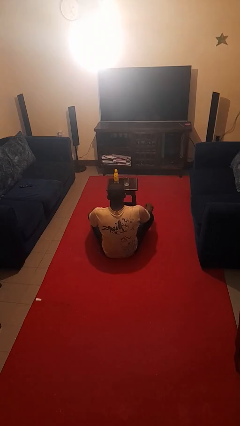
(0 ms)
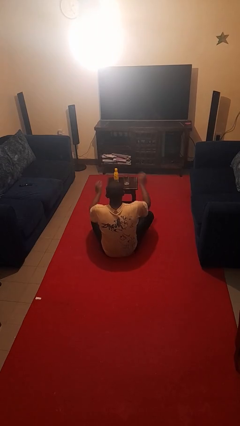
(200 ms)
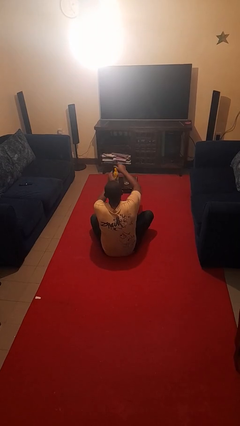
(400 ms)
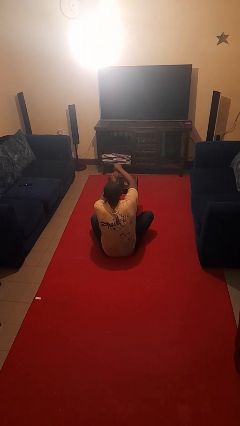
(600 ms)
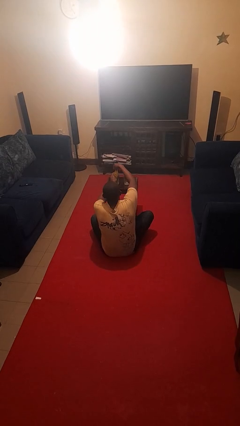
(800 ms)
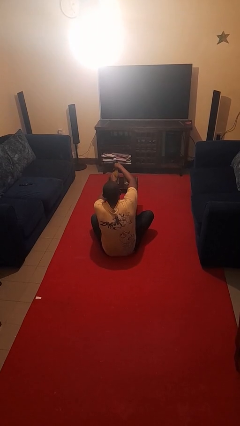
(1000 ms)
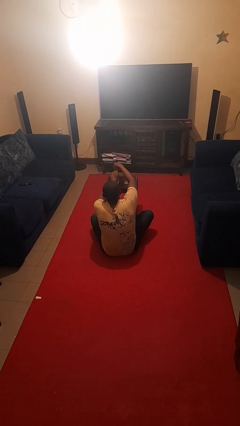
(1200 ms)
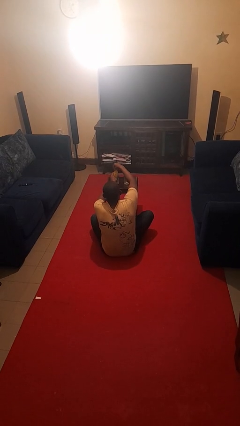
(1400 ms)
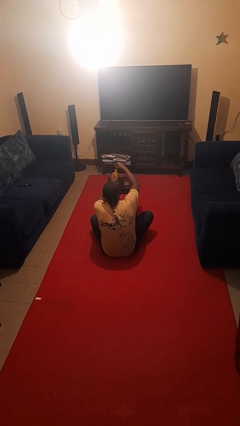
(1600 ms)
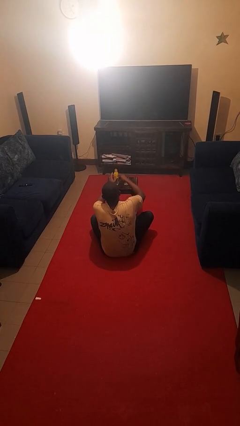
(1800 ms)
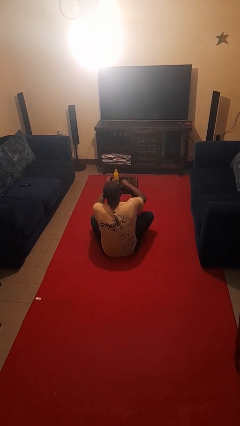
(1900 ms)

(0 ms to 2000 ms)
person unscrews lid from bottle

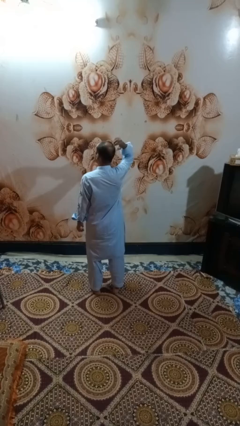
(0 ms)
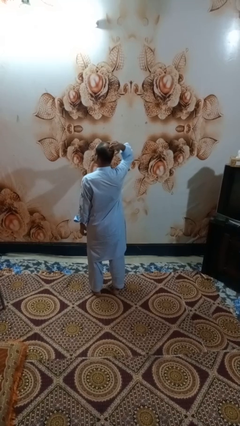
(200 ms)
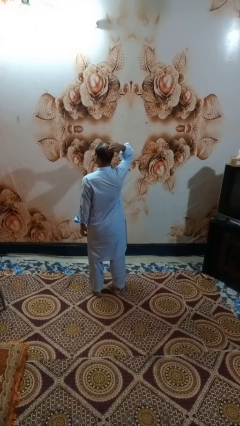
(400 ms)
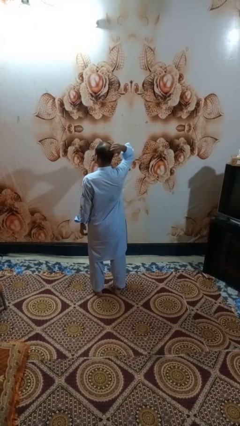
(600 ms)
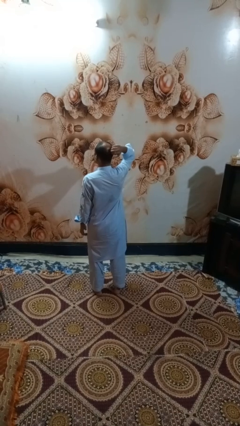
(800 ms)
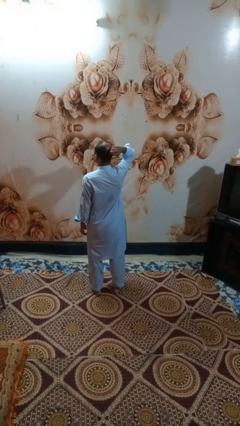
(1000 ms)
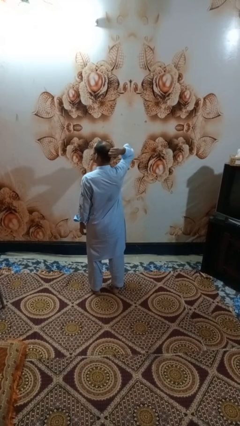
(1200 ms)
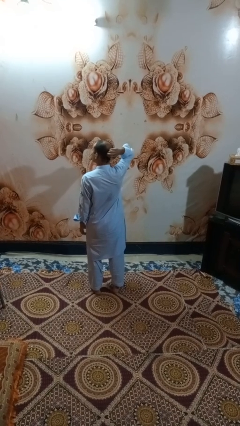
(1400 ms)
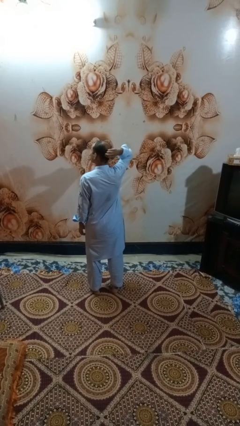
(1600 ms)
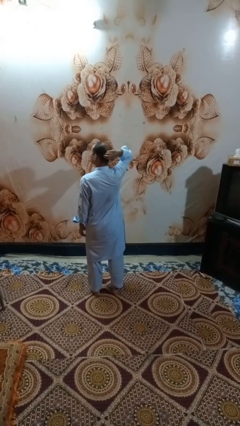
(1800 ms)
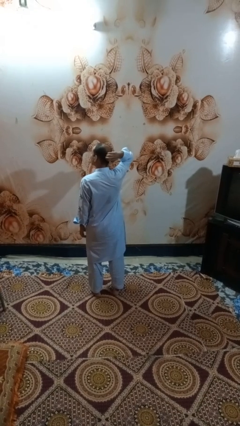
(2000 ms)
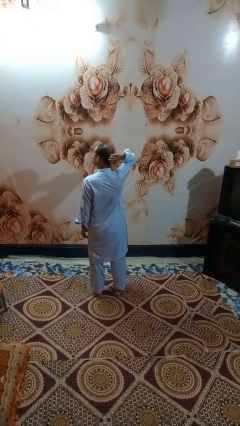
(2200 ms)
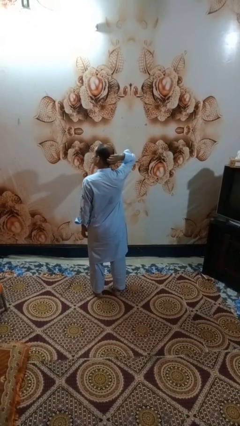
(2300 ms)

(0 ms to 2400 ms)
person scratches face

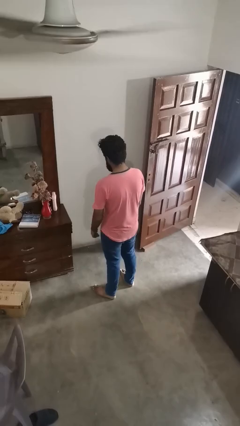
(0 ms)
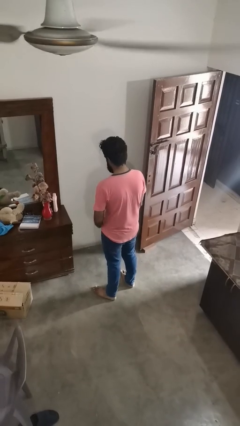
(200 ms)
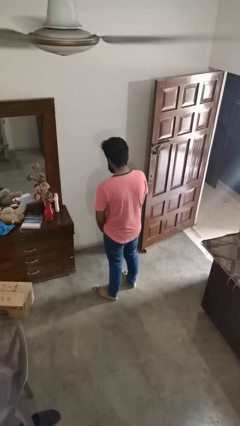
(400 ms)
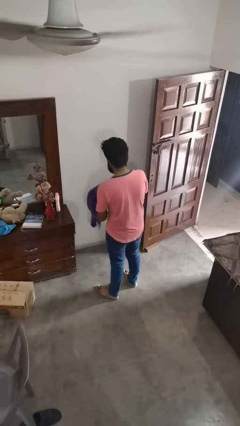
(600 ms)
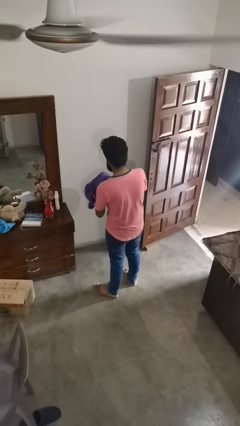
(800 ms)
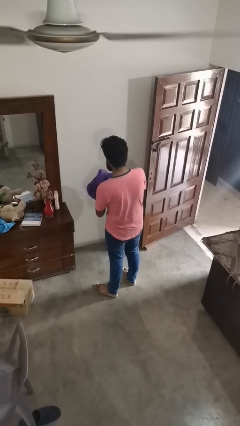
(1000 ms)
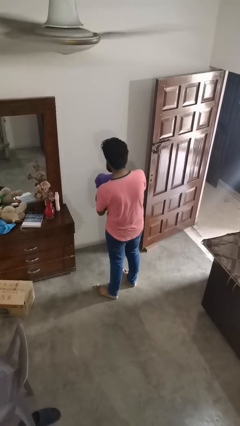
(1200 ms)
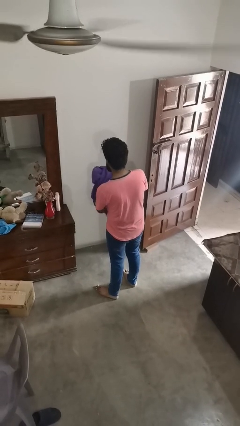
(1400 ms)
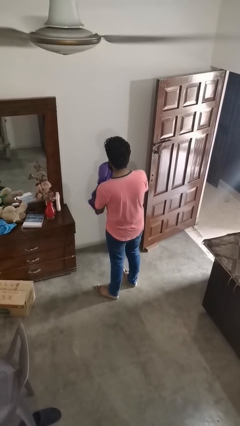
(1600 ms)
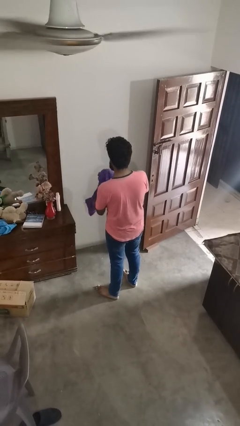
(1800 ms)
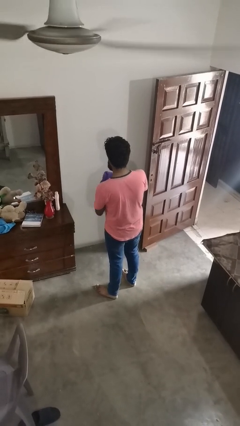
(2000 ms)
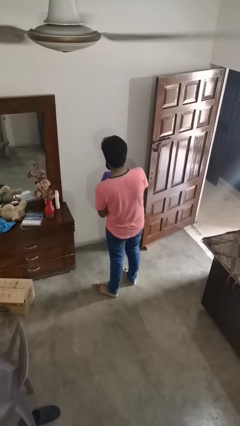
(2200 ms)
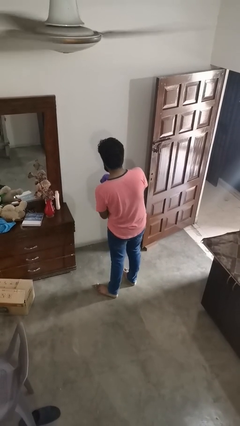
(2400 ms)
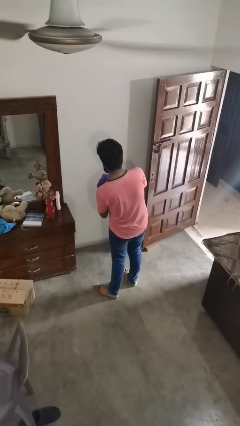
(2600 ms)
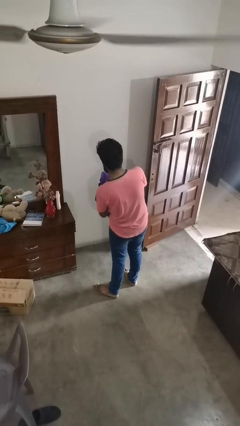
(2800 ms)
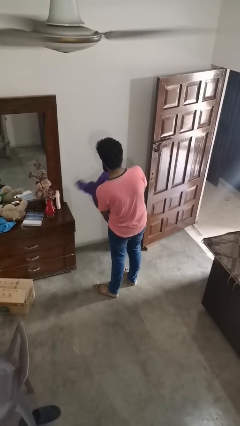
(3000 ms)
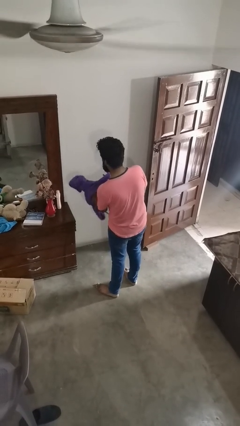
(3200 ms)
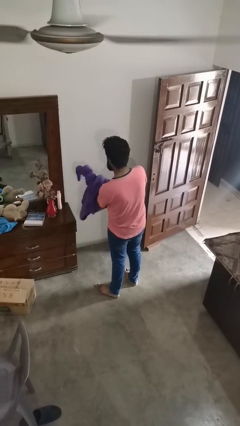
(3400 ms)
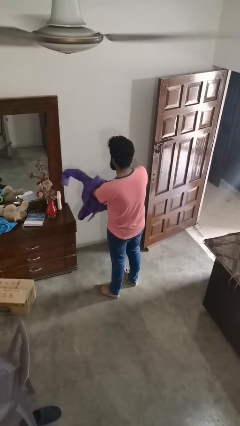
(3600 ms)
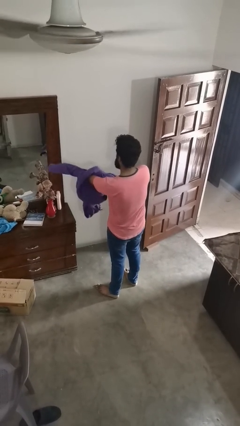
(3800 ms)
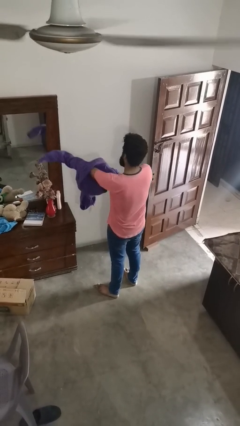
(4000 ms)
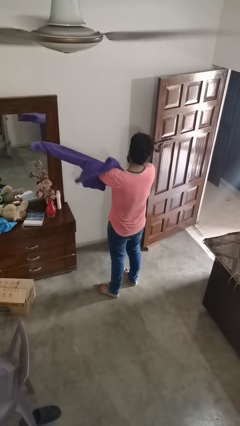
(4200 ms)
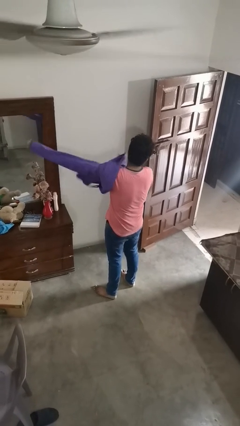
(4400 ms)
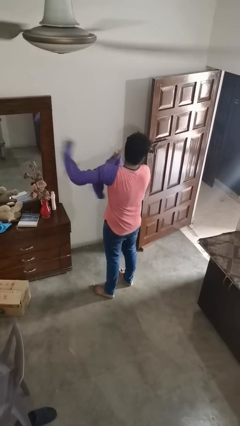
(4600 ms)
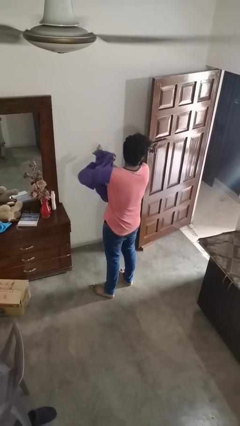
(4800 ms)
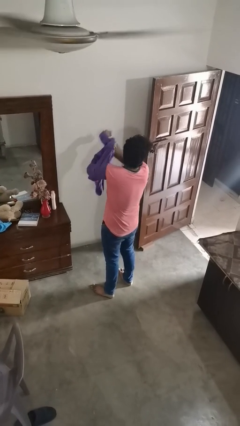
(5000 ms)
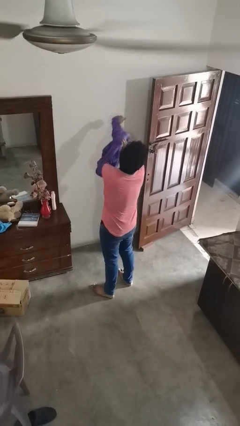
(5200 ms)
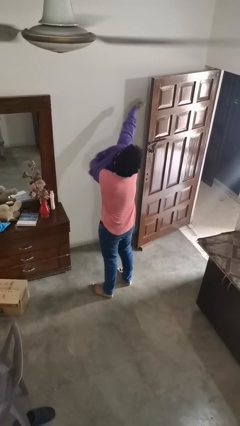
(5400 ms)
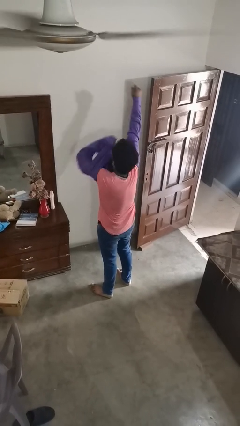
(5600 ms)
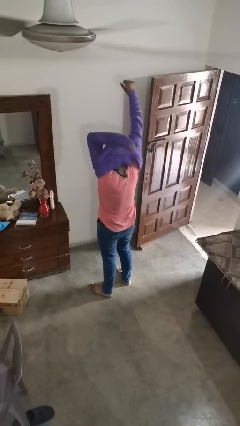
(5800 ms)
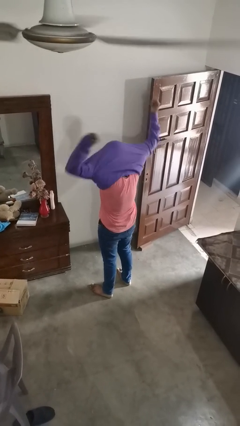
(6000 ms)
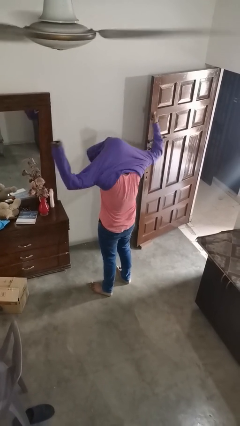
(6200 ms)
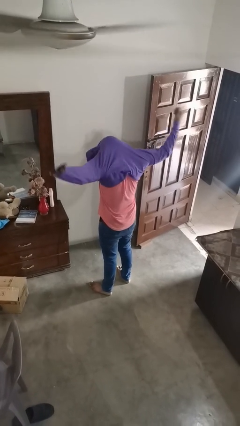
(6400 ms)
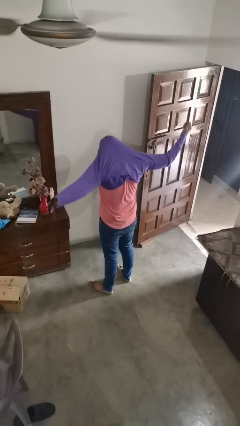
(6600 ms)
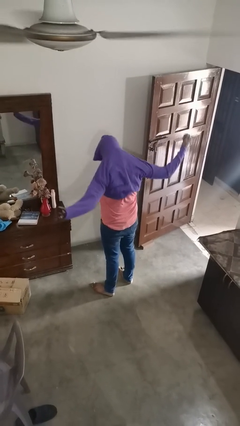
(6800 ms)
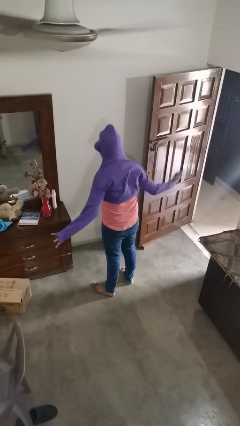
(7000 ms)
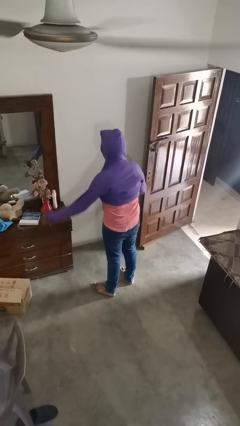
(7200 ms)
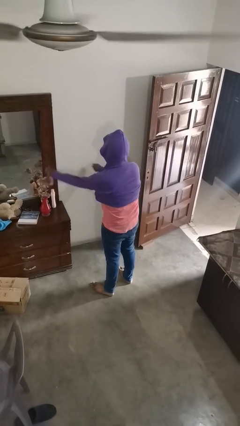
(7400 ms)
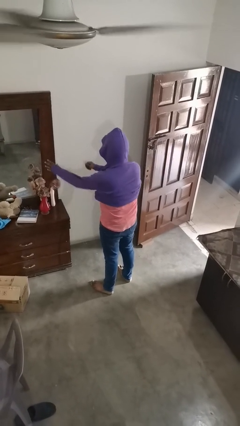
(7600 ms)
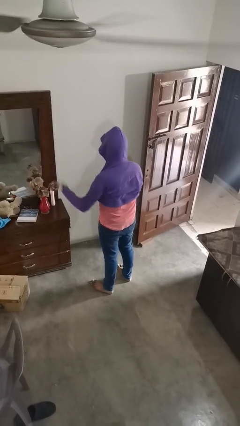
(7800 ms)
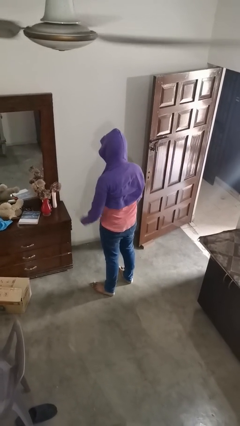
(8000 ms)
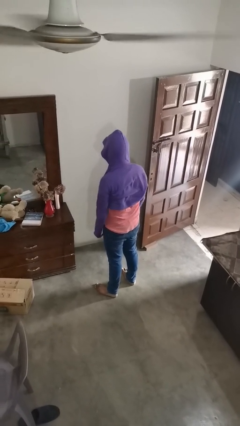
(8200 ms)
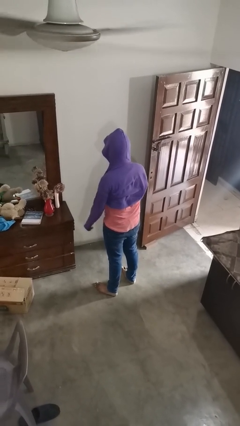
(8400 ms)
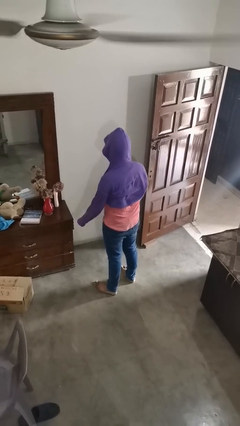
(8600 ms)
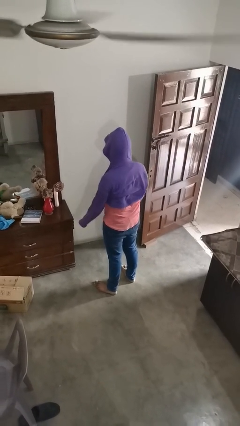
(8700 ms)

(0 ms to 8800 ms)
person puts on hoodie

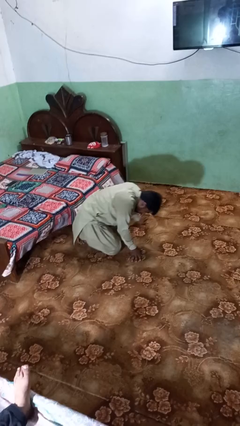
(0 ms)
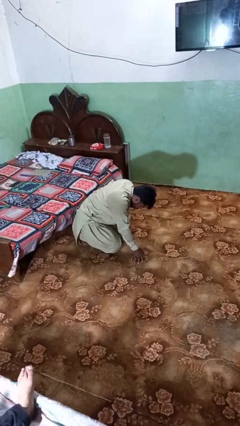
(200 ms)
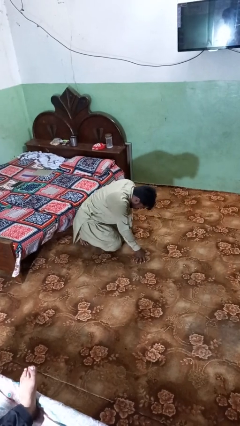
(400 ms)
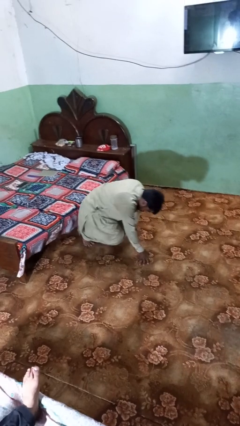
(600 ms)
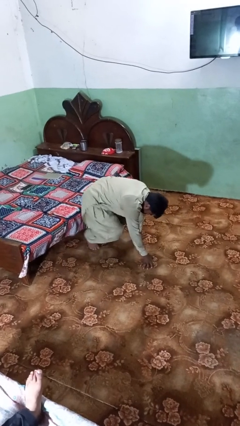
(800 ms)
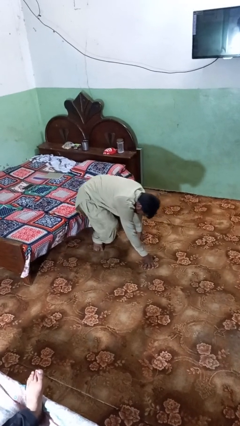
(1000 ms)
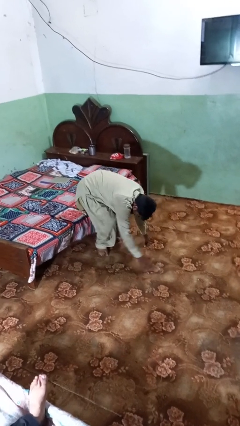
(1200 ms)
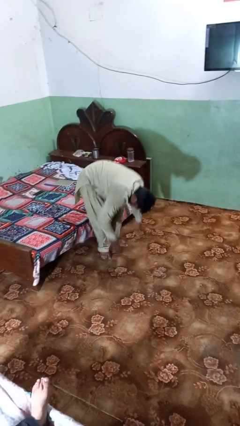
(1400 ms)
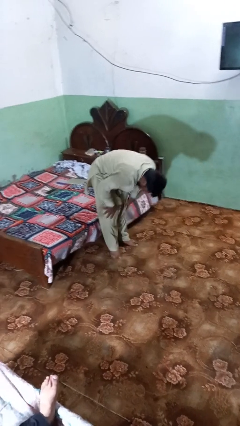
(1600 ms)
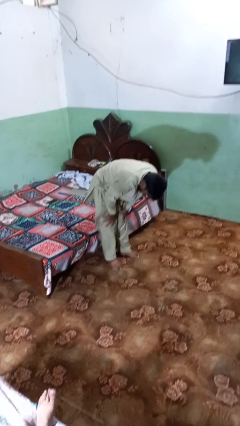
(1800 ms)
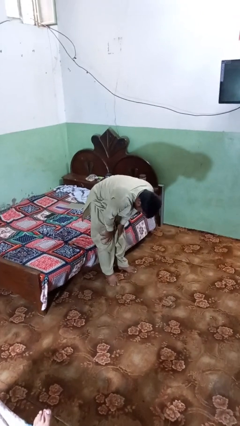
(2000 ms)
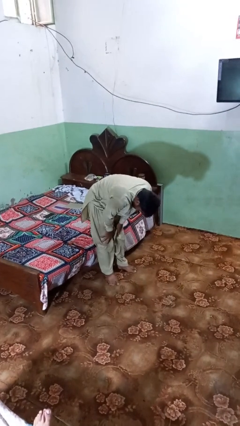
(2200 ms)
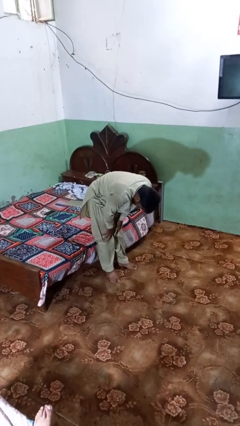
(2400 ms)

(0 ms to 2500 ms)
person stands up from floor

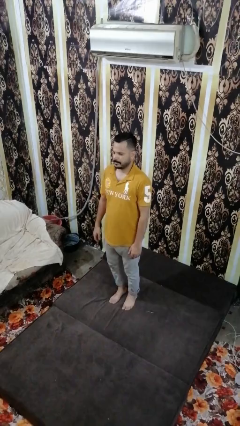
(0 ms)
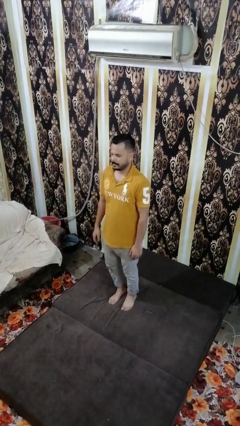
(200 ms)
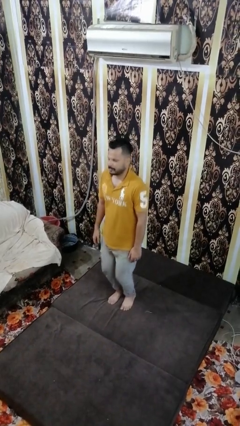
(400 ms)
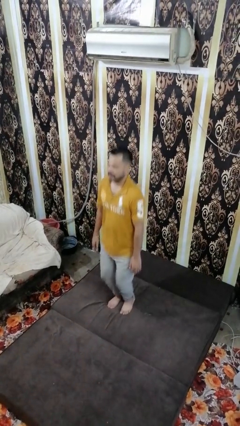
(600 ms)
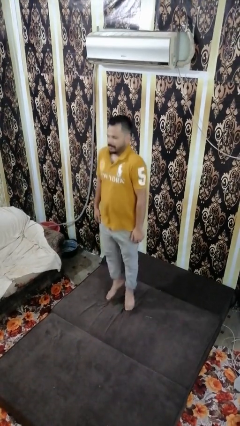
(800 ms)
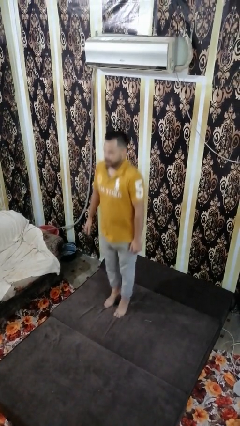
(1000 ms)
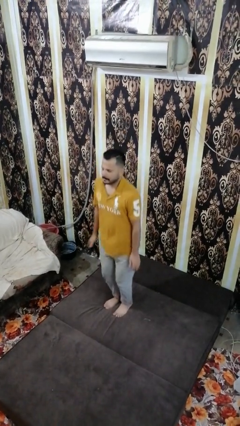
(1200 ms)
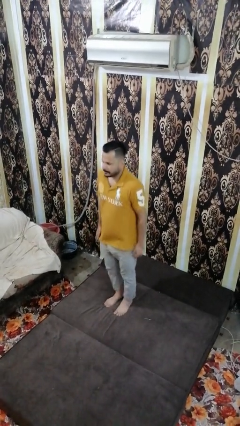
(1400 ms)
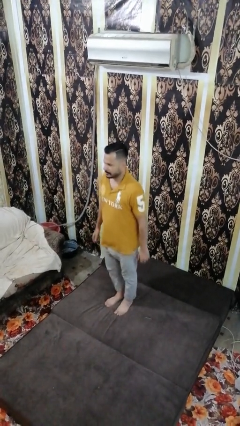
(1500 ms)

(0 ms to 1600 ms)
person jumps on bed
